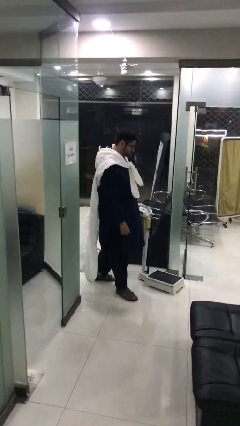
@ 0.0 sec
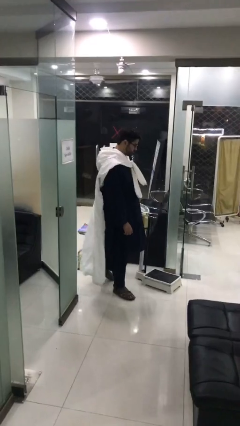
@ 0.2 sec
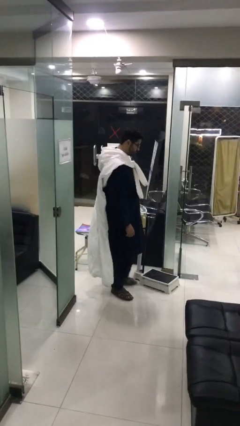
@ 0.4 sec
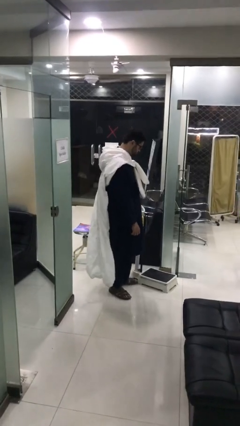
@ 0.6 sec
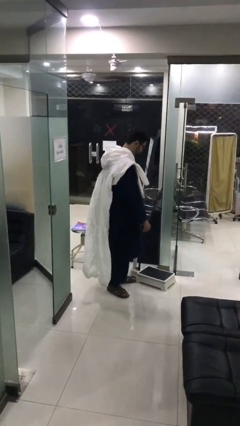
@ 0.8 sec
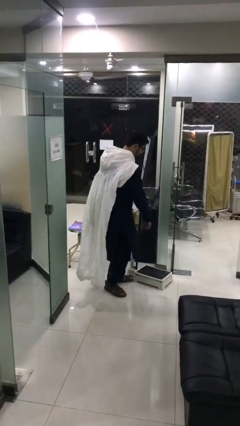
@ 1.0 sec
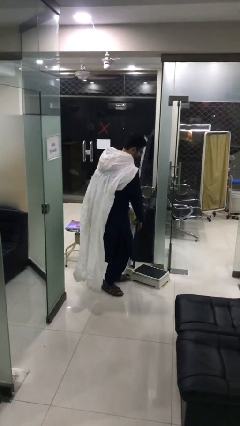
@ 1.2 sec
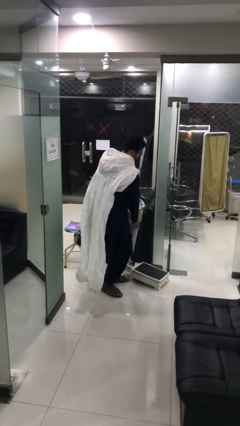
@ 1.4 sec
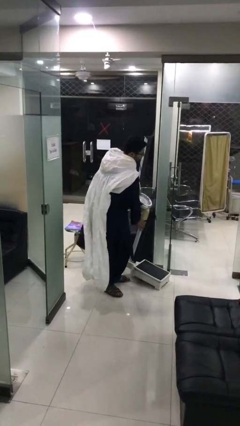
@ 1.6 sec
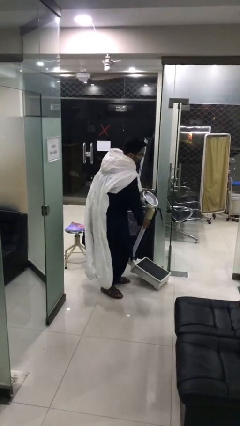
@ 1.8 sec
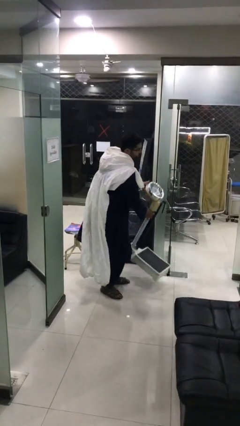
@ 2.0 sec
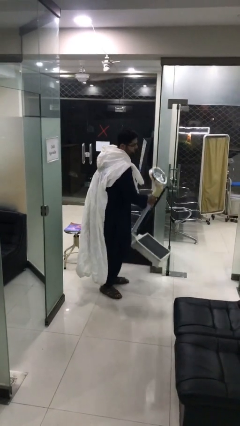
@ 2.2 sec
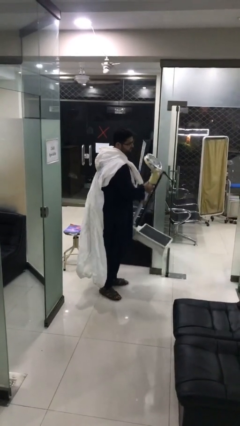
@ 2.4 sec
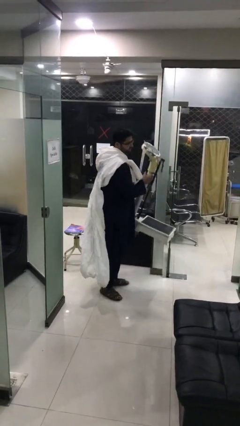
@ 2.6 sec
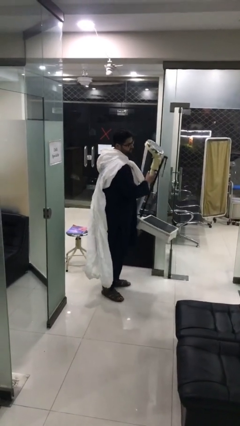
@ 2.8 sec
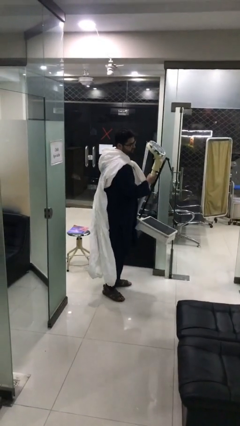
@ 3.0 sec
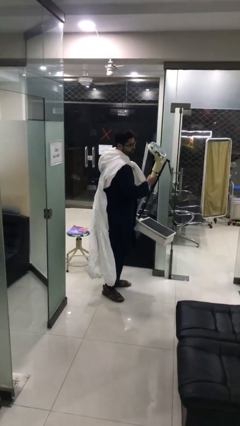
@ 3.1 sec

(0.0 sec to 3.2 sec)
person picks up object from floor

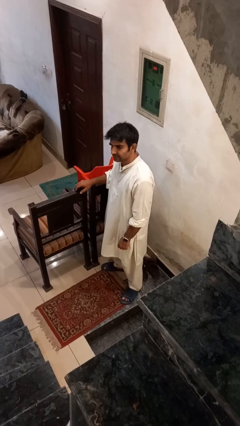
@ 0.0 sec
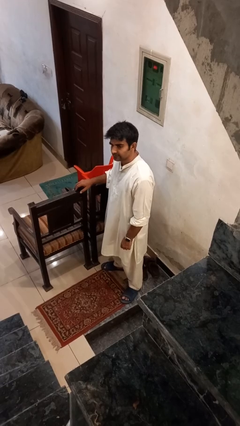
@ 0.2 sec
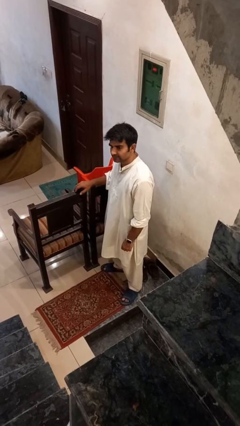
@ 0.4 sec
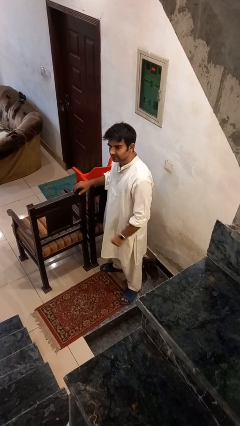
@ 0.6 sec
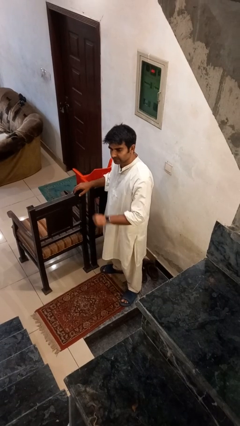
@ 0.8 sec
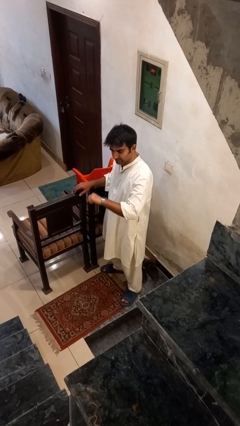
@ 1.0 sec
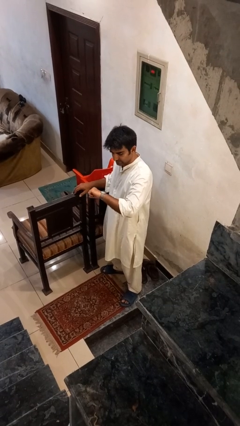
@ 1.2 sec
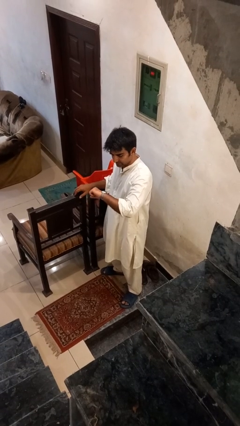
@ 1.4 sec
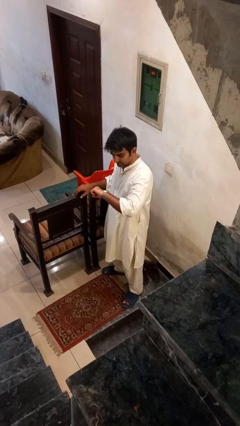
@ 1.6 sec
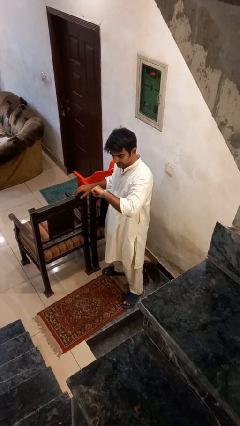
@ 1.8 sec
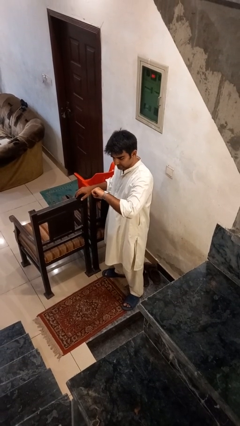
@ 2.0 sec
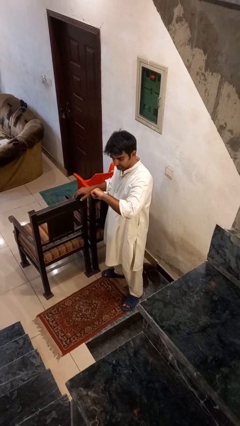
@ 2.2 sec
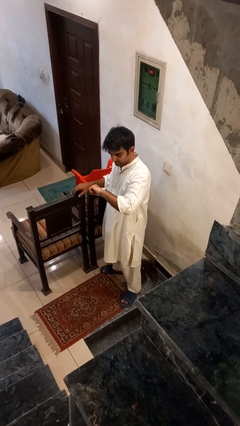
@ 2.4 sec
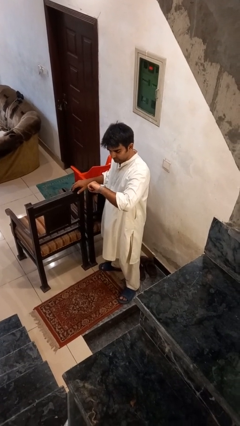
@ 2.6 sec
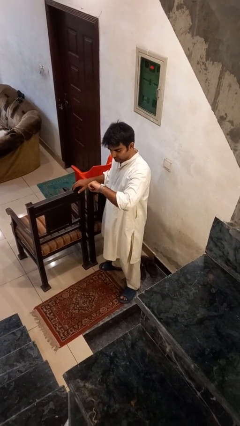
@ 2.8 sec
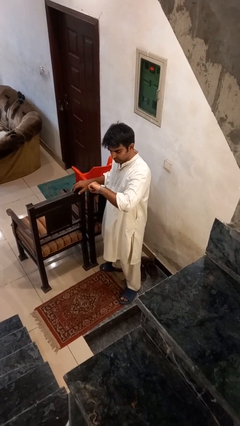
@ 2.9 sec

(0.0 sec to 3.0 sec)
person looks at wristwatch

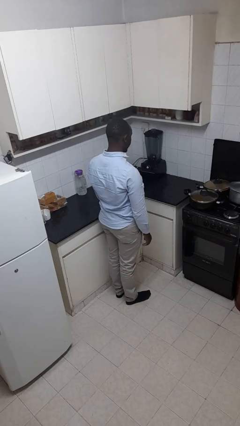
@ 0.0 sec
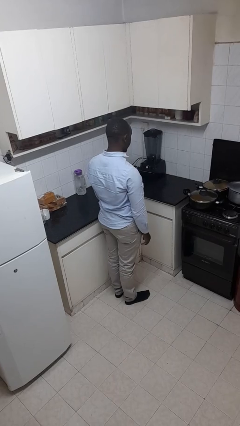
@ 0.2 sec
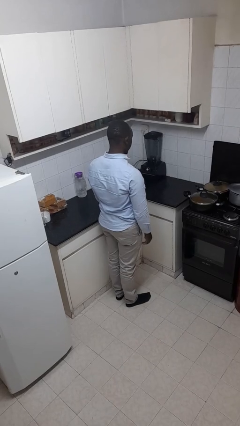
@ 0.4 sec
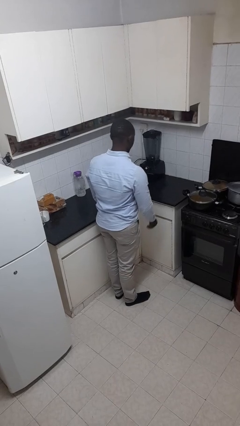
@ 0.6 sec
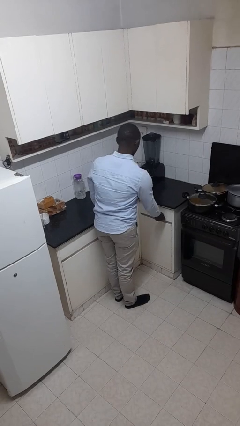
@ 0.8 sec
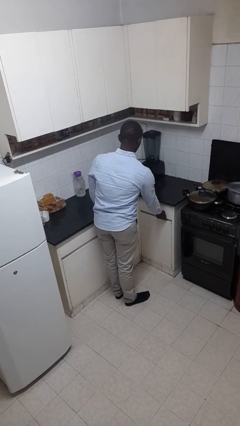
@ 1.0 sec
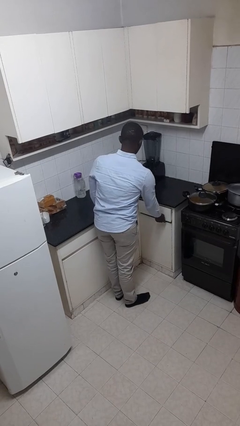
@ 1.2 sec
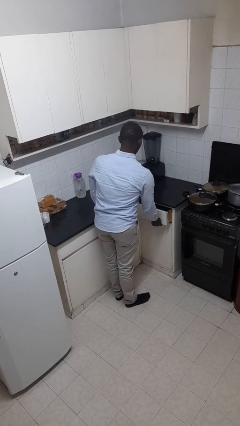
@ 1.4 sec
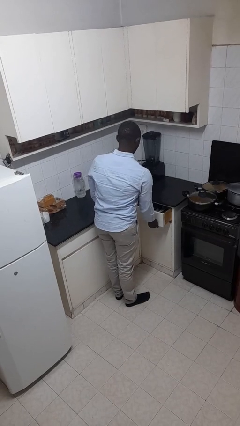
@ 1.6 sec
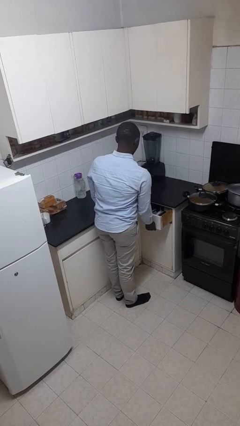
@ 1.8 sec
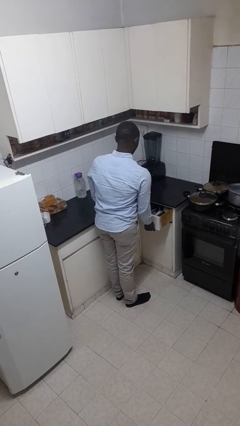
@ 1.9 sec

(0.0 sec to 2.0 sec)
person opens kitchen drawer

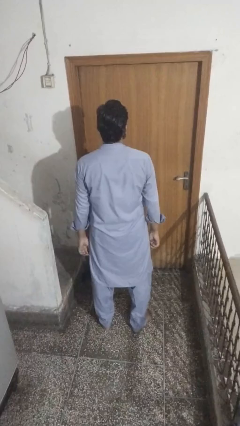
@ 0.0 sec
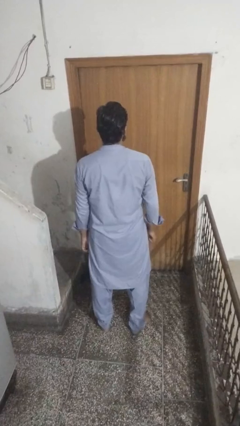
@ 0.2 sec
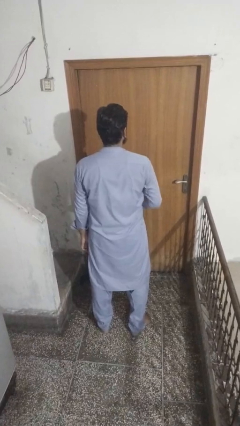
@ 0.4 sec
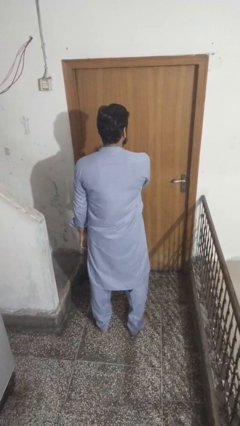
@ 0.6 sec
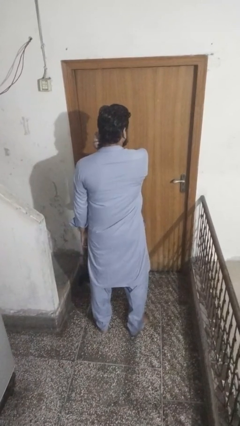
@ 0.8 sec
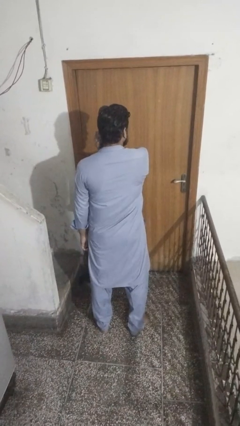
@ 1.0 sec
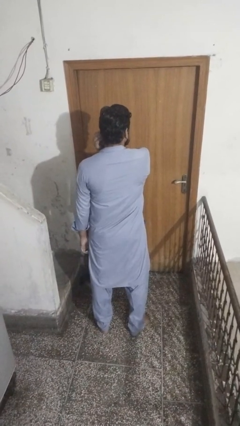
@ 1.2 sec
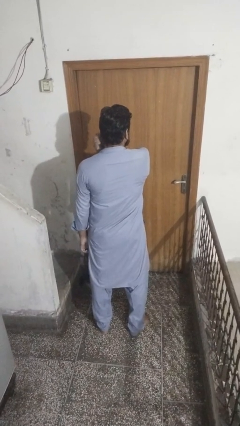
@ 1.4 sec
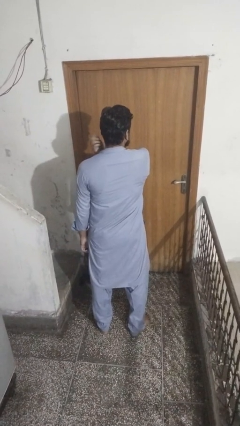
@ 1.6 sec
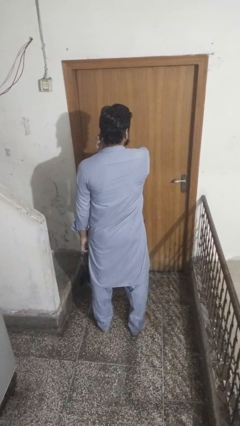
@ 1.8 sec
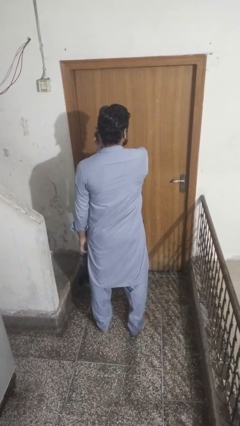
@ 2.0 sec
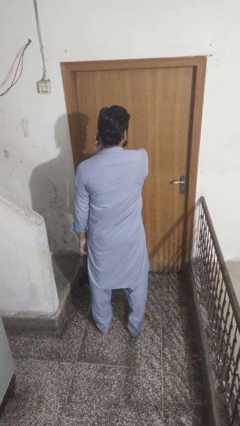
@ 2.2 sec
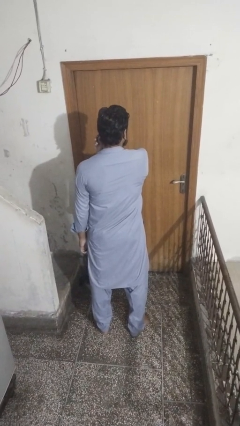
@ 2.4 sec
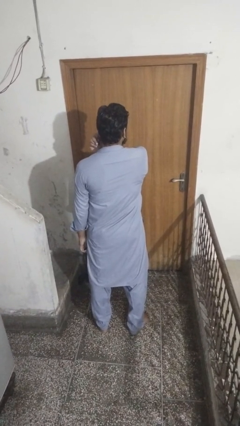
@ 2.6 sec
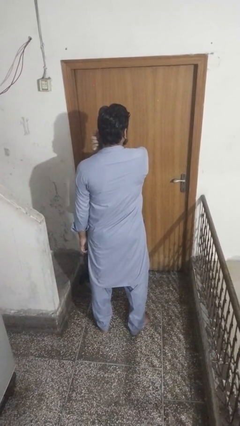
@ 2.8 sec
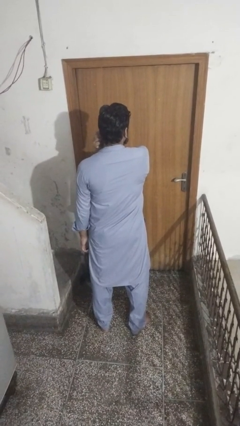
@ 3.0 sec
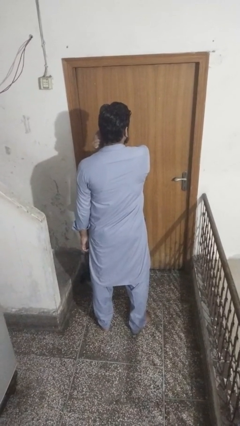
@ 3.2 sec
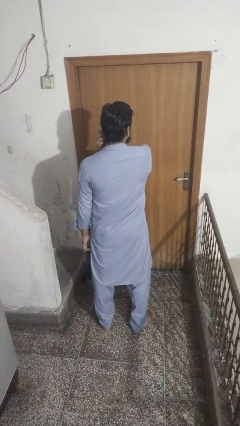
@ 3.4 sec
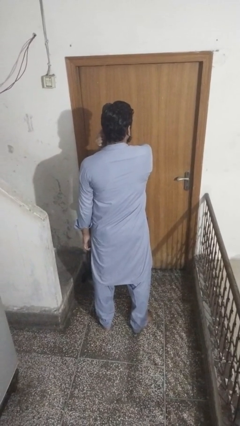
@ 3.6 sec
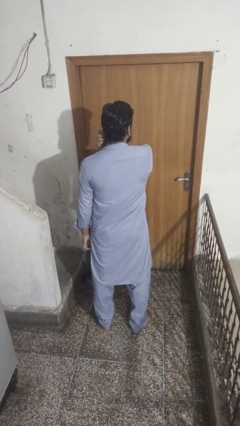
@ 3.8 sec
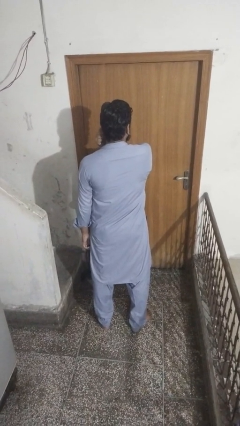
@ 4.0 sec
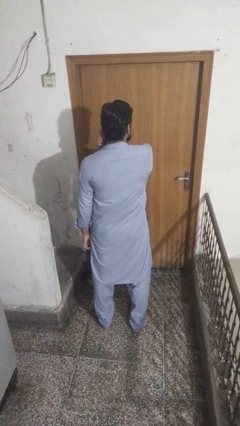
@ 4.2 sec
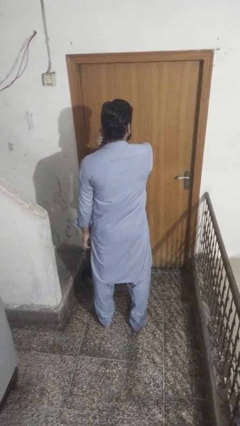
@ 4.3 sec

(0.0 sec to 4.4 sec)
person touches earlobe

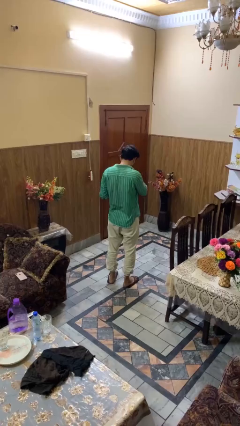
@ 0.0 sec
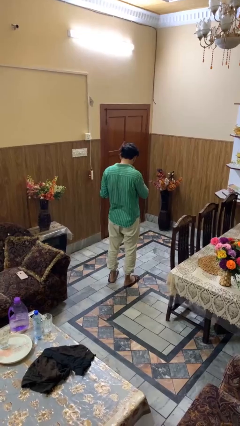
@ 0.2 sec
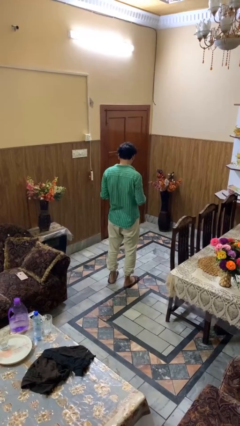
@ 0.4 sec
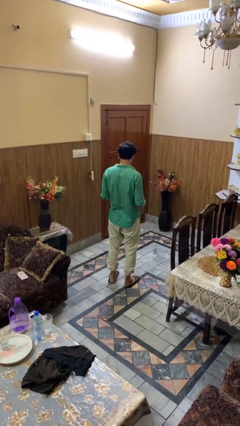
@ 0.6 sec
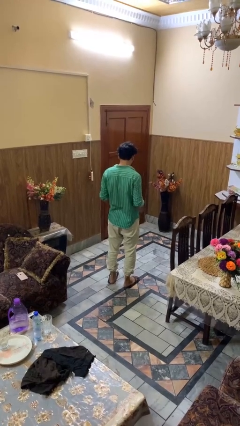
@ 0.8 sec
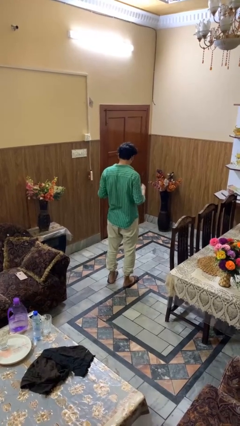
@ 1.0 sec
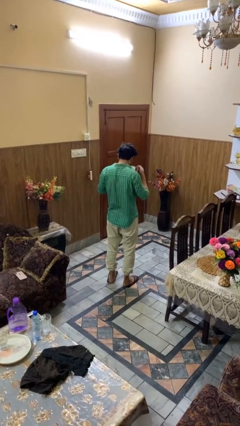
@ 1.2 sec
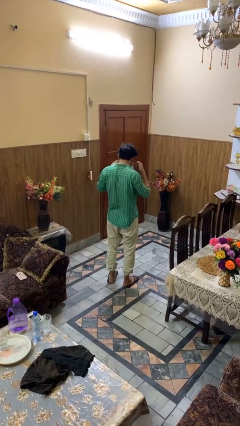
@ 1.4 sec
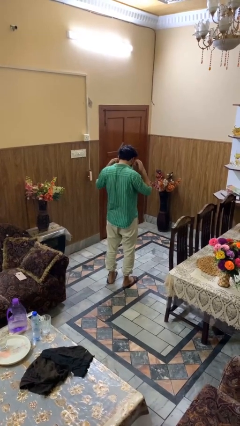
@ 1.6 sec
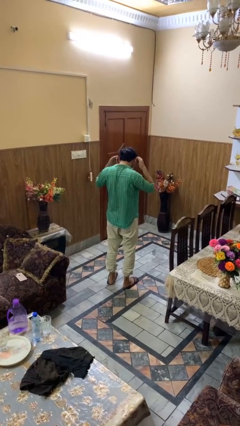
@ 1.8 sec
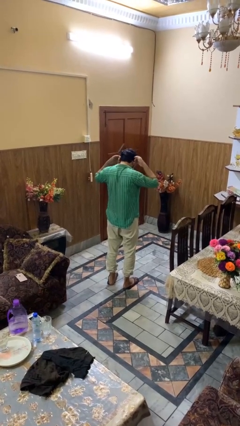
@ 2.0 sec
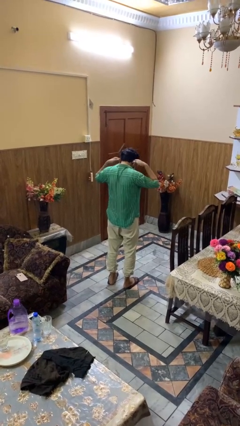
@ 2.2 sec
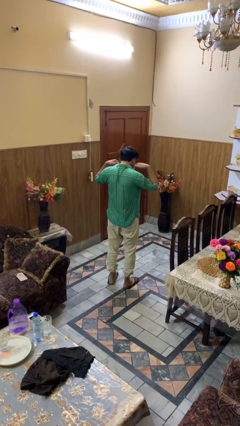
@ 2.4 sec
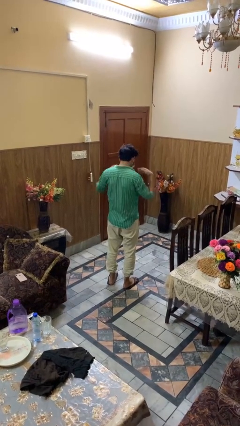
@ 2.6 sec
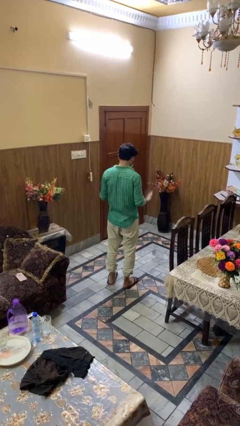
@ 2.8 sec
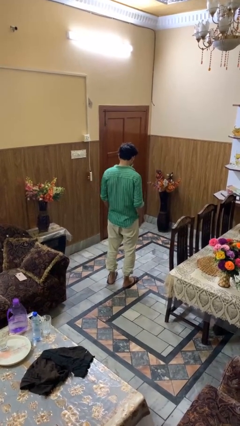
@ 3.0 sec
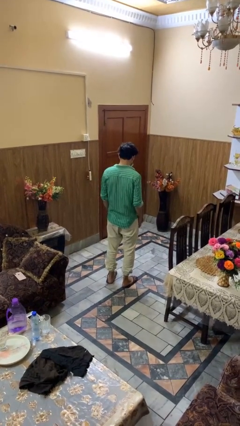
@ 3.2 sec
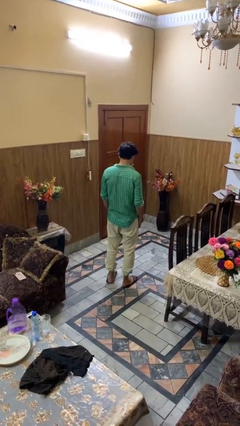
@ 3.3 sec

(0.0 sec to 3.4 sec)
person puts on facemask

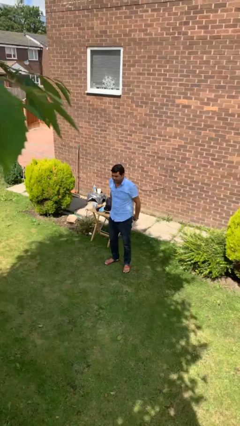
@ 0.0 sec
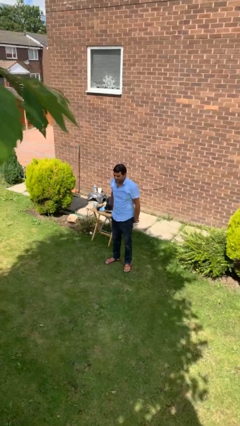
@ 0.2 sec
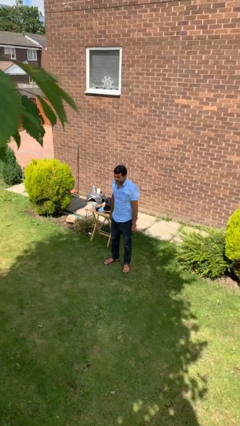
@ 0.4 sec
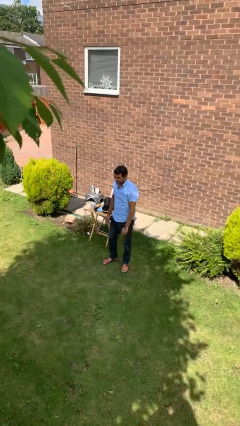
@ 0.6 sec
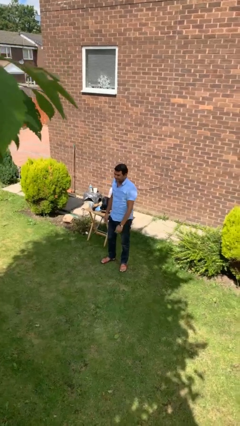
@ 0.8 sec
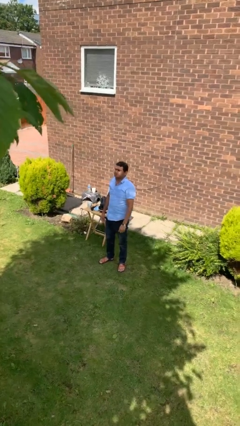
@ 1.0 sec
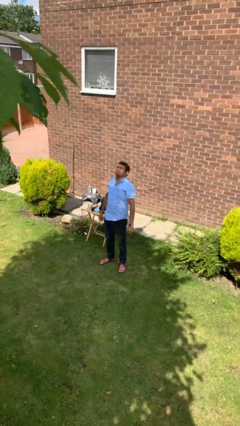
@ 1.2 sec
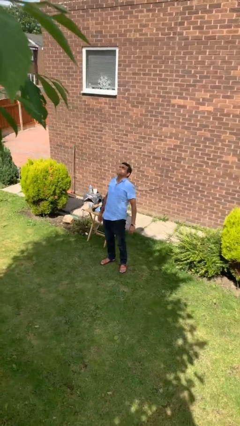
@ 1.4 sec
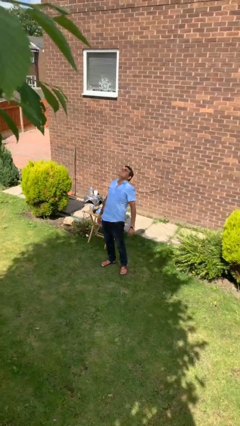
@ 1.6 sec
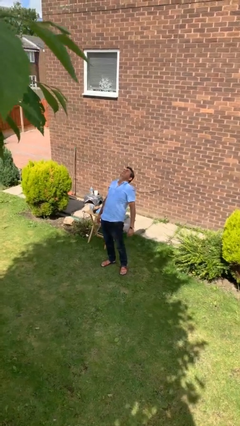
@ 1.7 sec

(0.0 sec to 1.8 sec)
person stretches back
